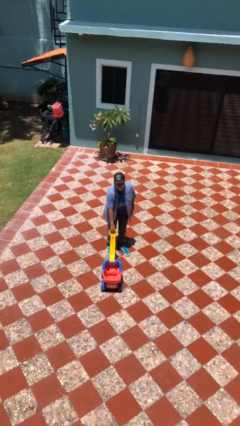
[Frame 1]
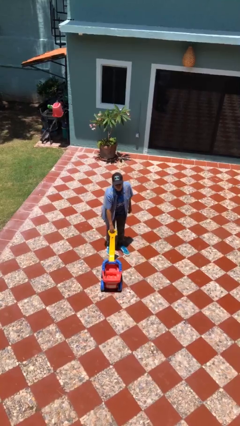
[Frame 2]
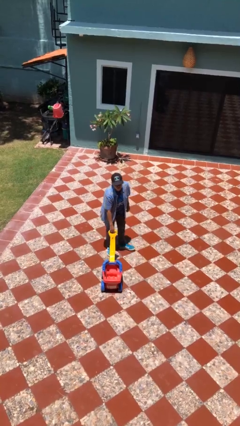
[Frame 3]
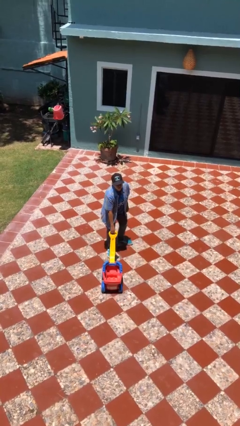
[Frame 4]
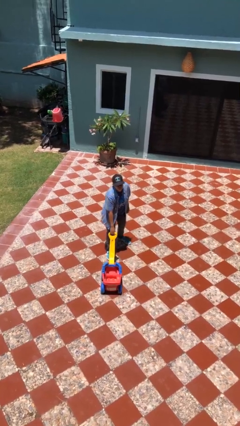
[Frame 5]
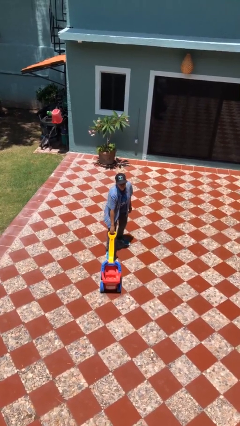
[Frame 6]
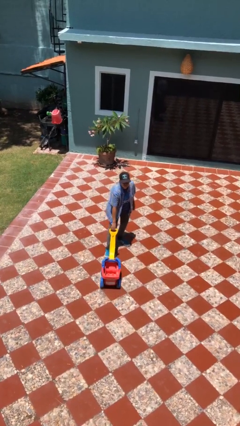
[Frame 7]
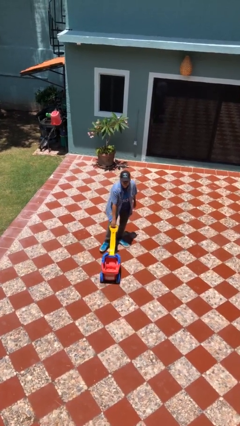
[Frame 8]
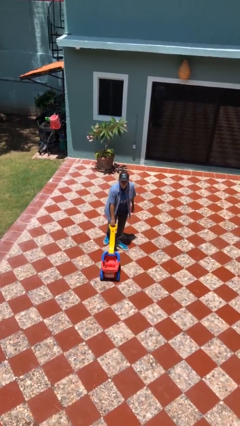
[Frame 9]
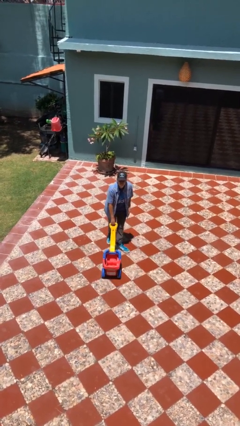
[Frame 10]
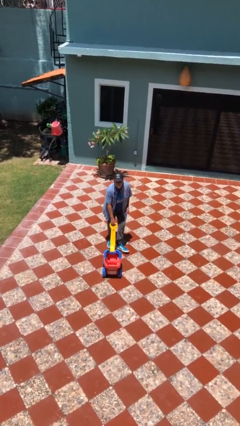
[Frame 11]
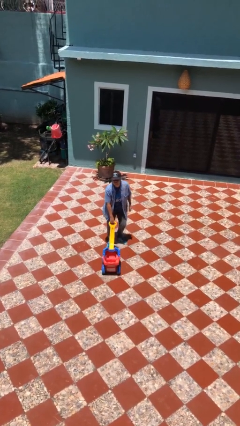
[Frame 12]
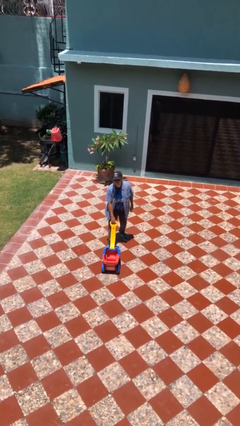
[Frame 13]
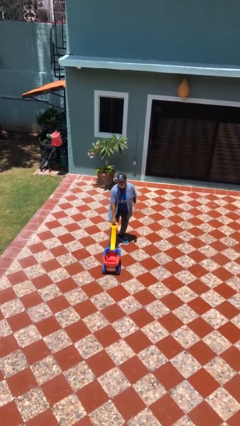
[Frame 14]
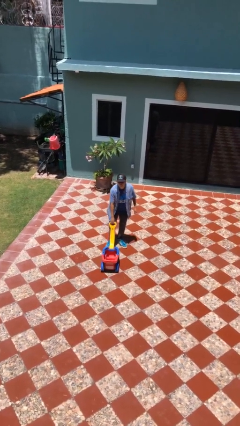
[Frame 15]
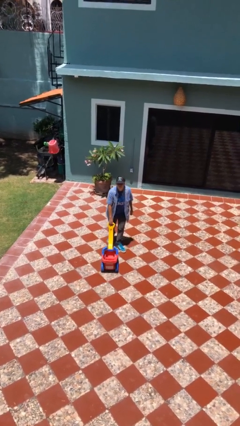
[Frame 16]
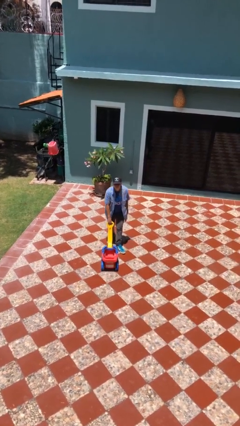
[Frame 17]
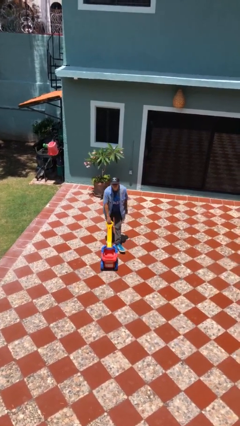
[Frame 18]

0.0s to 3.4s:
person pulls wheeled cart

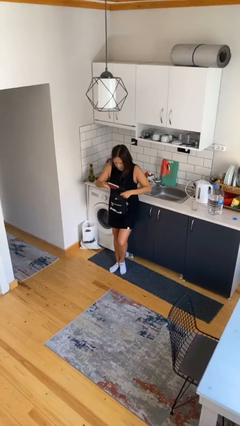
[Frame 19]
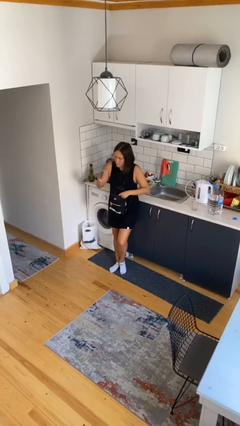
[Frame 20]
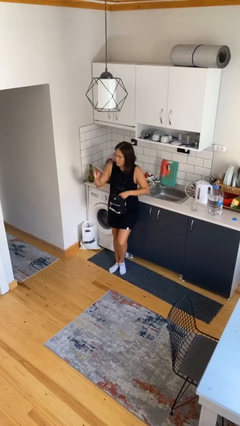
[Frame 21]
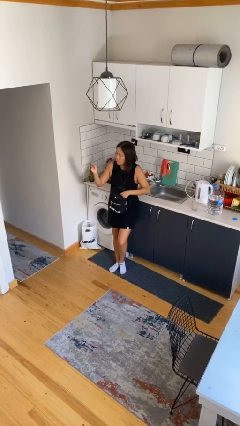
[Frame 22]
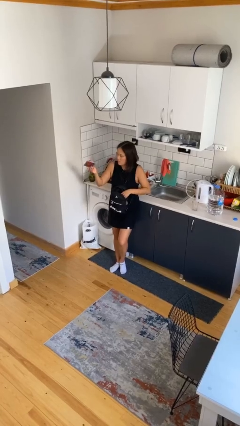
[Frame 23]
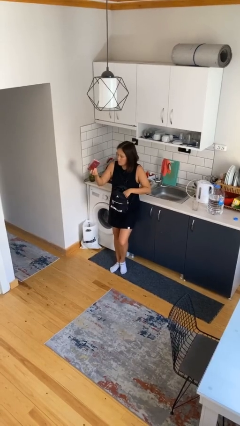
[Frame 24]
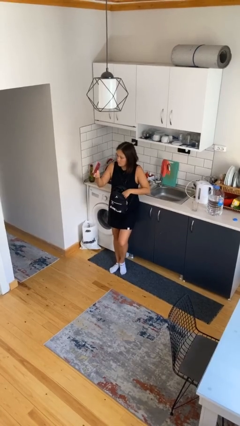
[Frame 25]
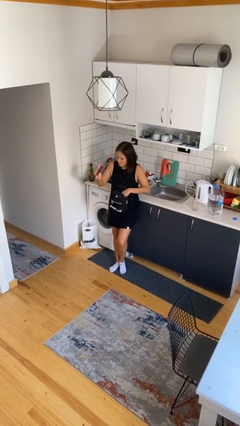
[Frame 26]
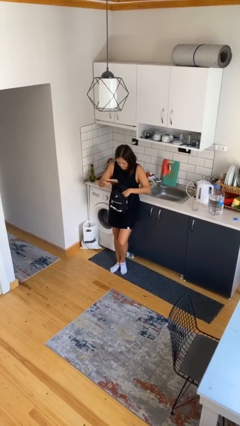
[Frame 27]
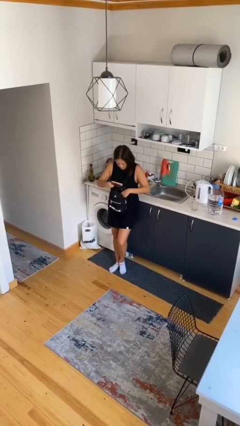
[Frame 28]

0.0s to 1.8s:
person takes object from backpack

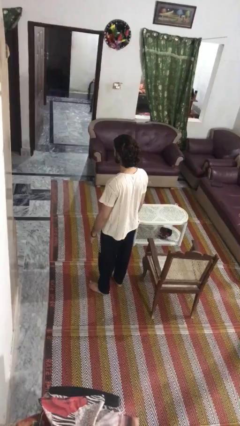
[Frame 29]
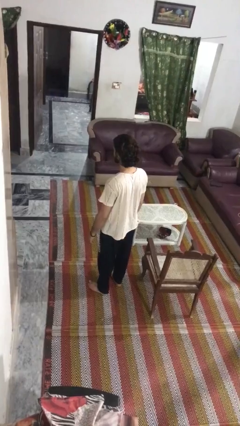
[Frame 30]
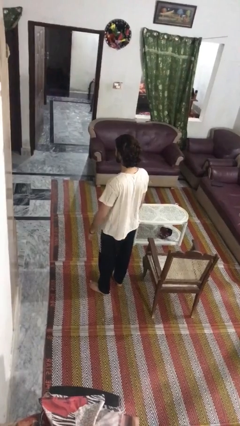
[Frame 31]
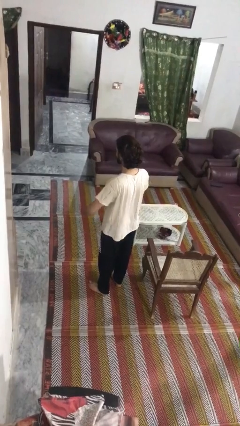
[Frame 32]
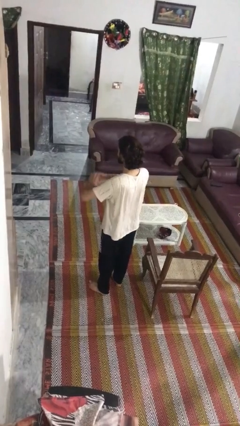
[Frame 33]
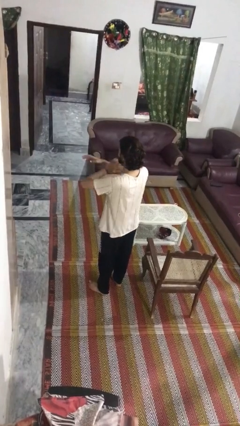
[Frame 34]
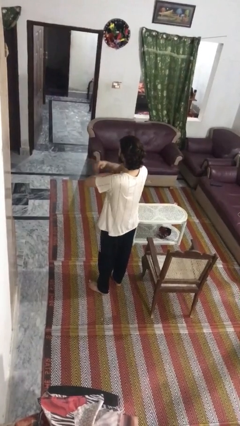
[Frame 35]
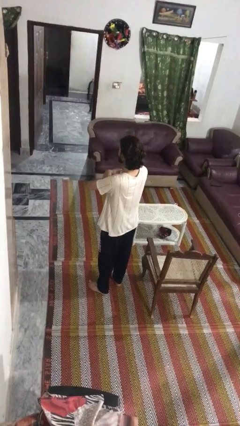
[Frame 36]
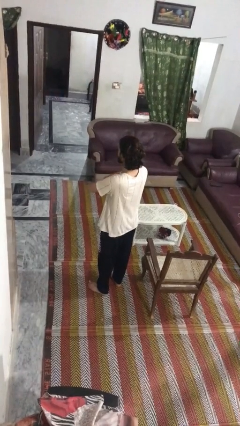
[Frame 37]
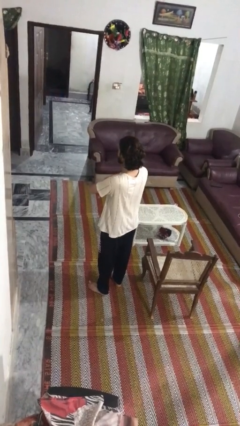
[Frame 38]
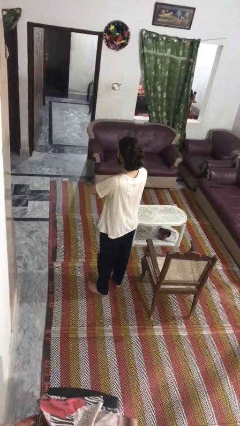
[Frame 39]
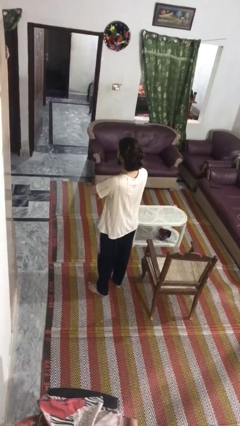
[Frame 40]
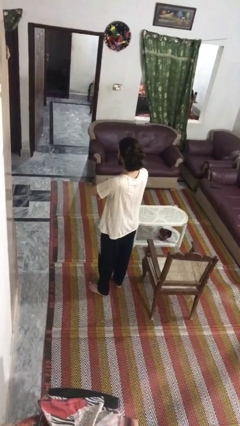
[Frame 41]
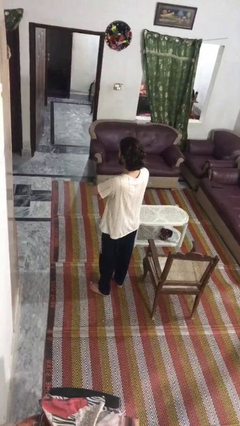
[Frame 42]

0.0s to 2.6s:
person crosses arms

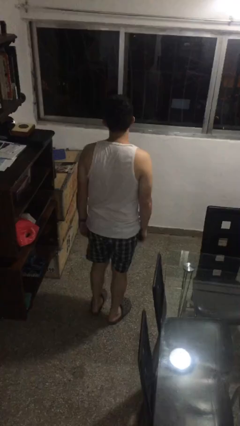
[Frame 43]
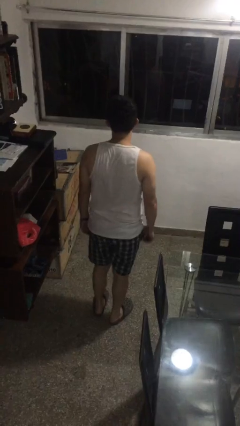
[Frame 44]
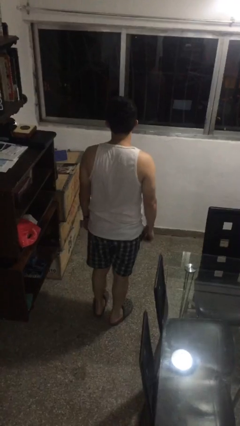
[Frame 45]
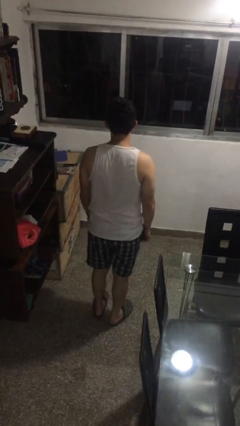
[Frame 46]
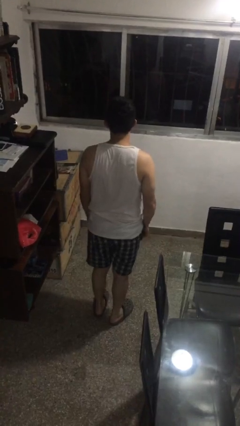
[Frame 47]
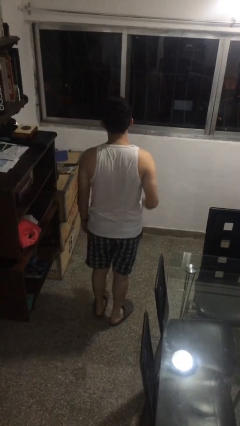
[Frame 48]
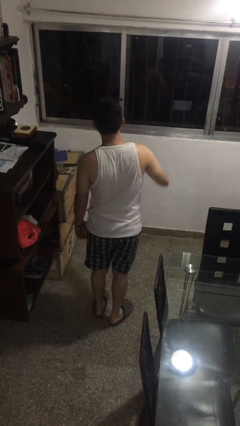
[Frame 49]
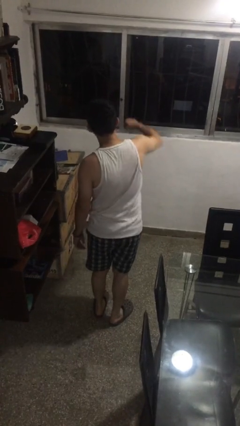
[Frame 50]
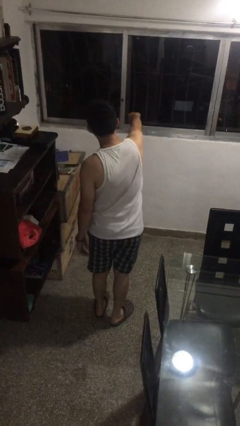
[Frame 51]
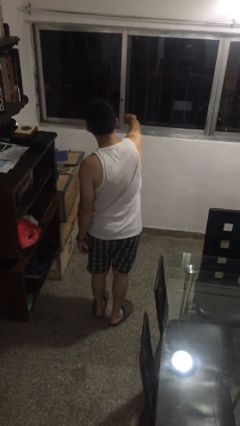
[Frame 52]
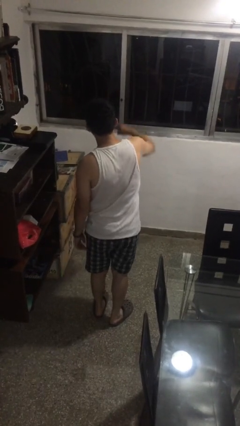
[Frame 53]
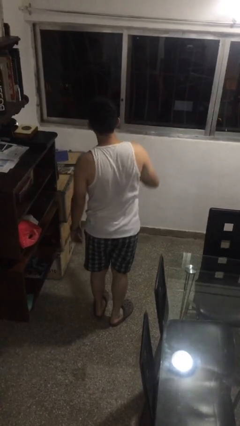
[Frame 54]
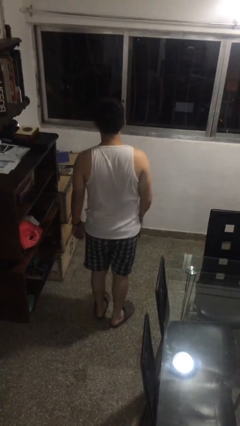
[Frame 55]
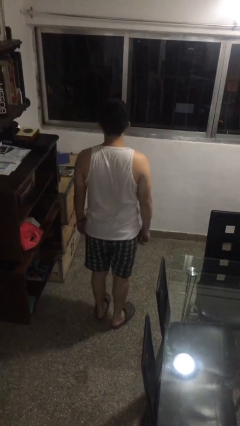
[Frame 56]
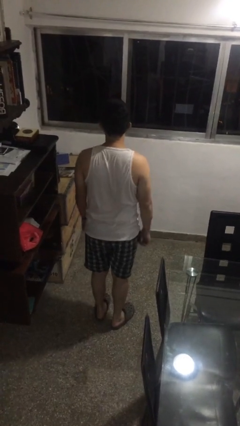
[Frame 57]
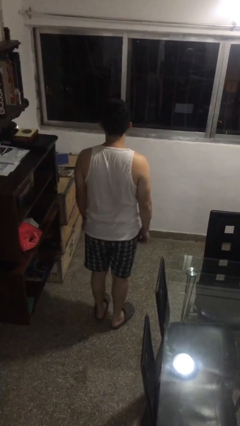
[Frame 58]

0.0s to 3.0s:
person karate chop

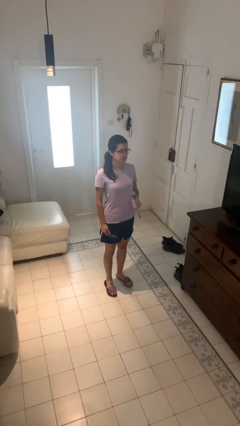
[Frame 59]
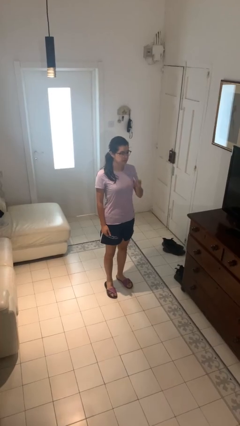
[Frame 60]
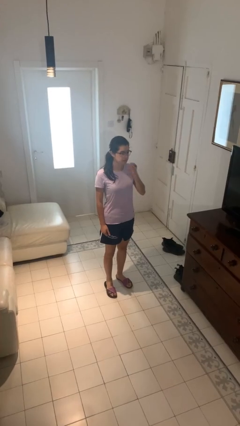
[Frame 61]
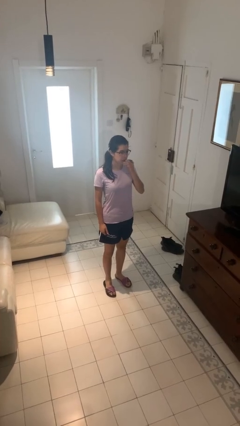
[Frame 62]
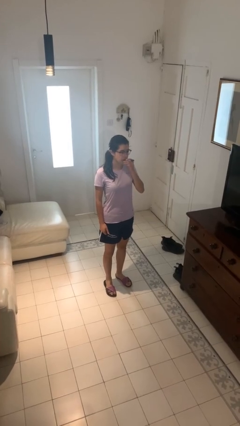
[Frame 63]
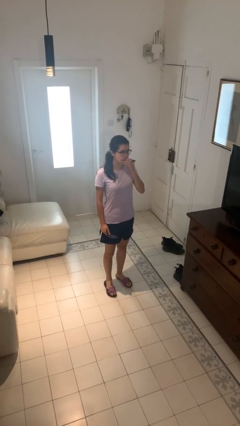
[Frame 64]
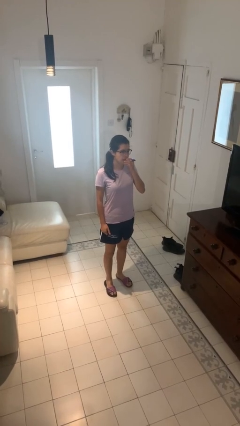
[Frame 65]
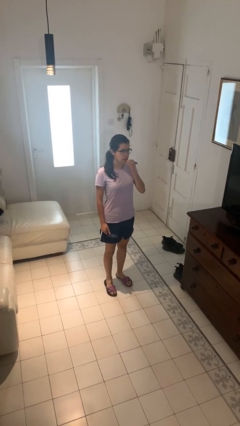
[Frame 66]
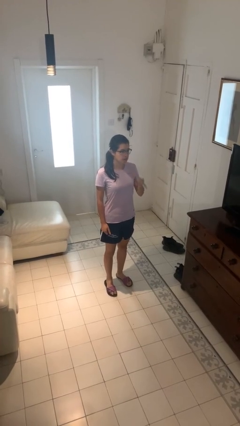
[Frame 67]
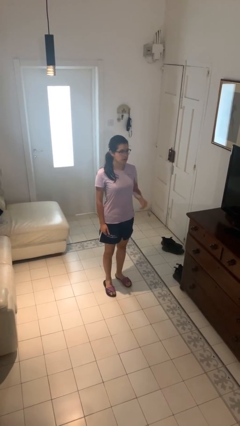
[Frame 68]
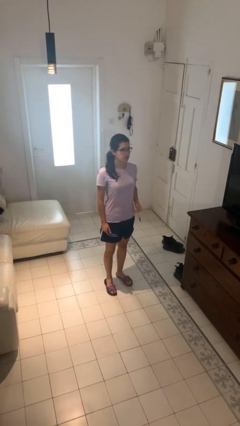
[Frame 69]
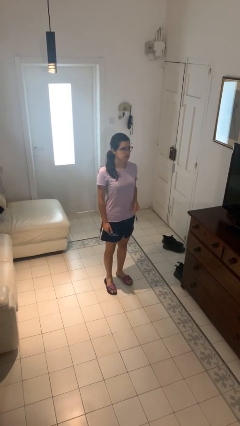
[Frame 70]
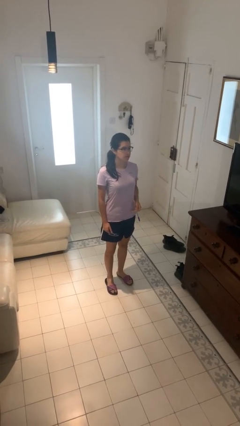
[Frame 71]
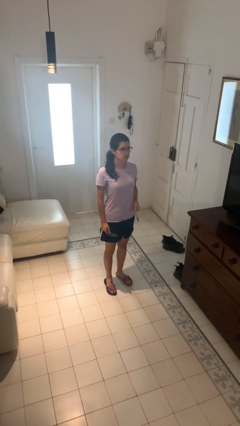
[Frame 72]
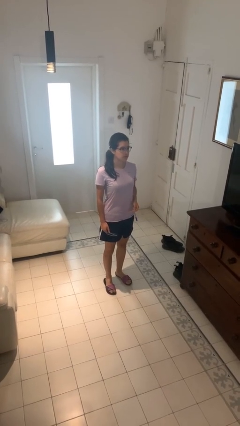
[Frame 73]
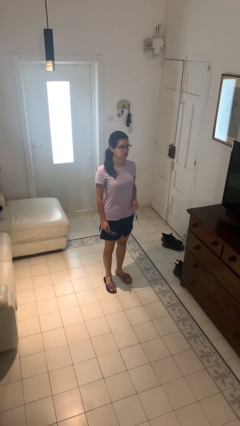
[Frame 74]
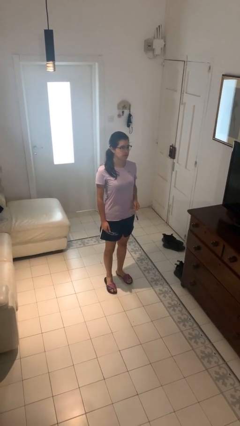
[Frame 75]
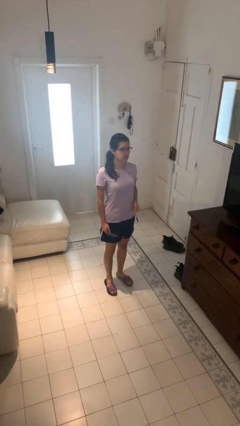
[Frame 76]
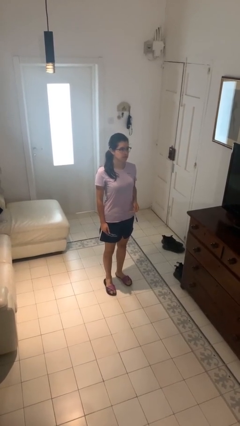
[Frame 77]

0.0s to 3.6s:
person vapes

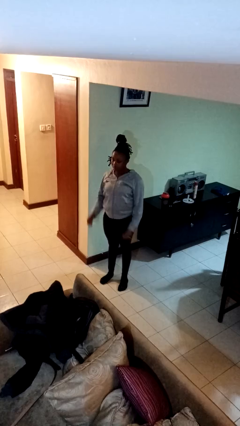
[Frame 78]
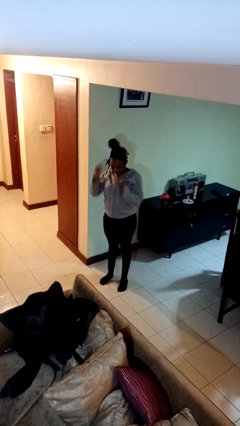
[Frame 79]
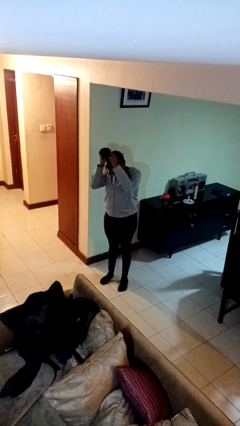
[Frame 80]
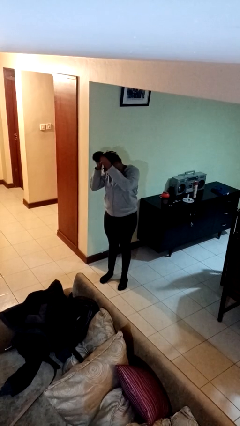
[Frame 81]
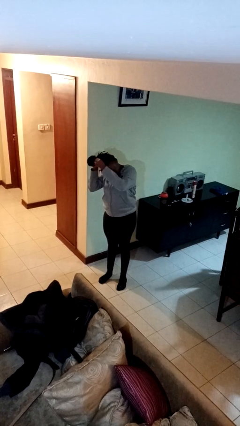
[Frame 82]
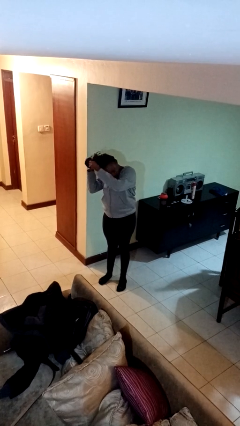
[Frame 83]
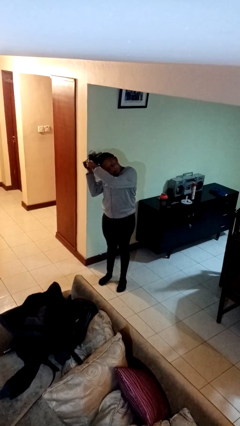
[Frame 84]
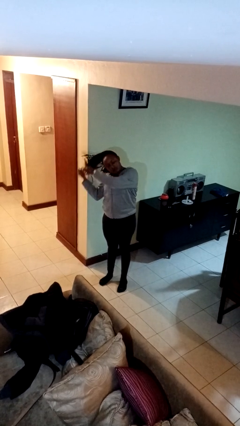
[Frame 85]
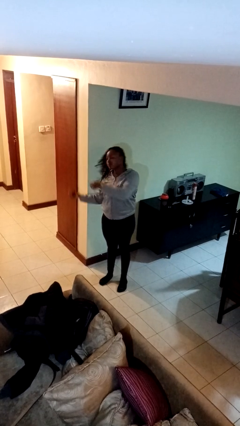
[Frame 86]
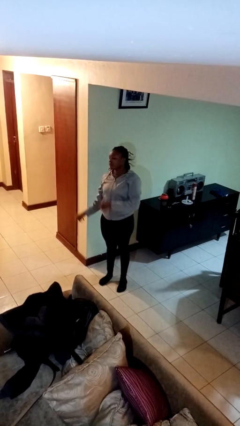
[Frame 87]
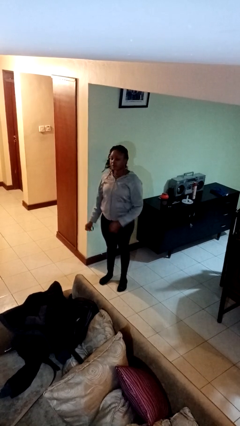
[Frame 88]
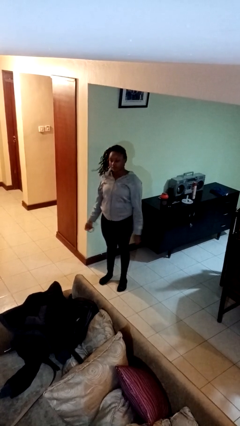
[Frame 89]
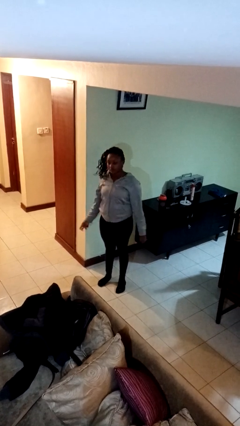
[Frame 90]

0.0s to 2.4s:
person takes off hairtie

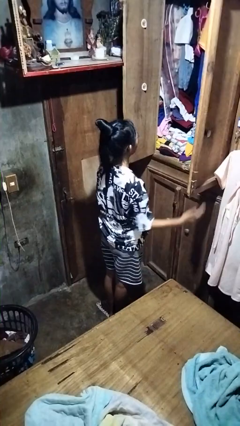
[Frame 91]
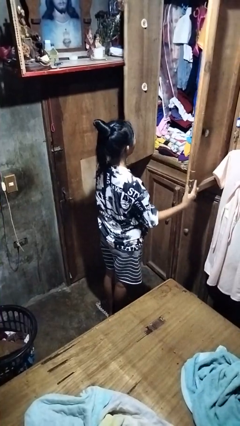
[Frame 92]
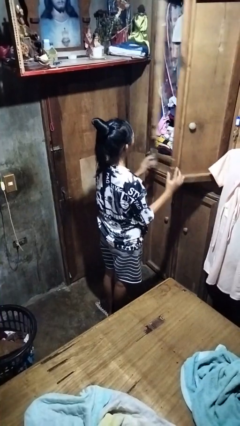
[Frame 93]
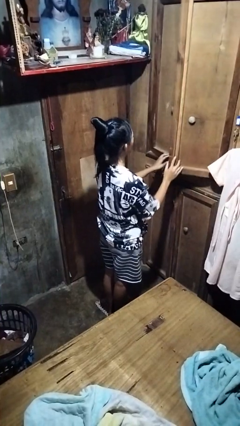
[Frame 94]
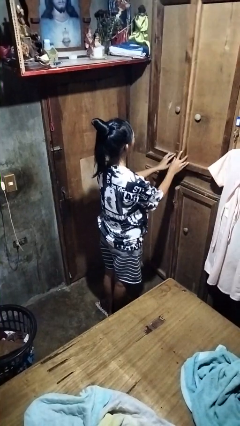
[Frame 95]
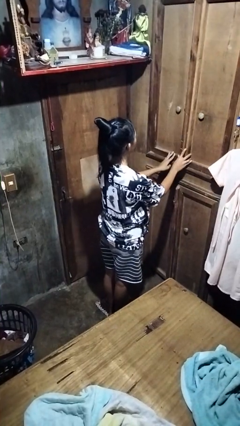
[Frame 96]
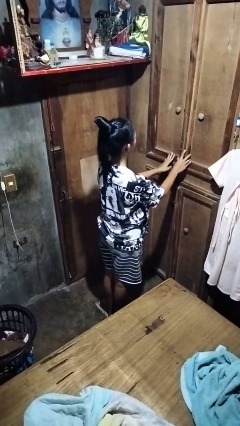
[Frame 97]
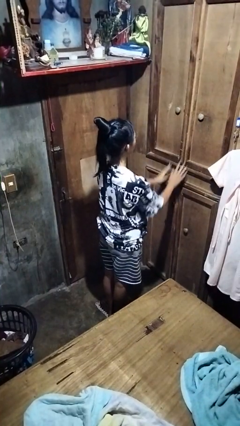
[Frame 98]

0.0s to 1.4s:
person closes closet door
